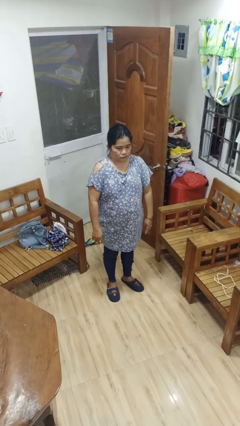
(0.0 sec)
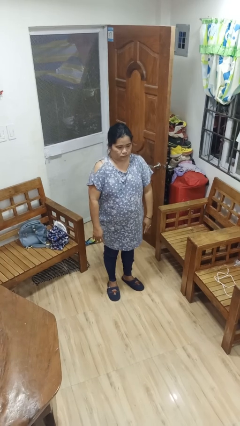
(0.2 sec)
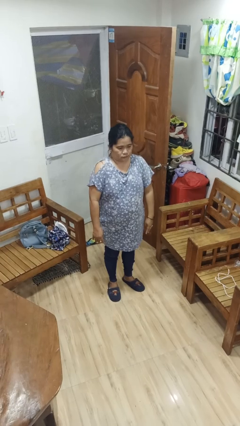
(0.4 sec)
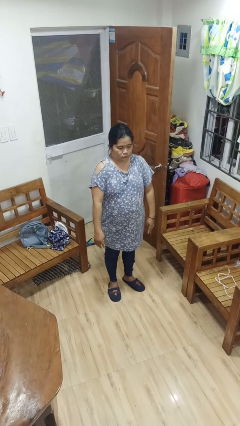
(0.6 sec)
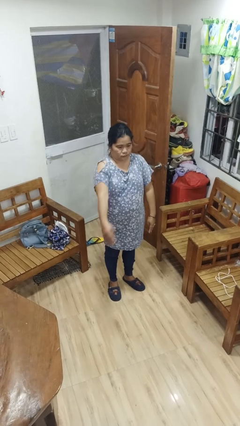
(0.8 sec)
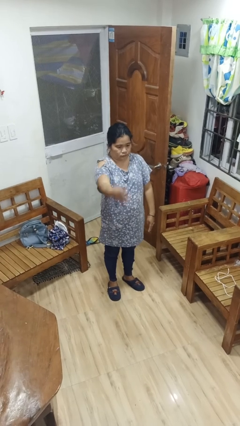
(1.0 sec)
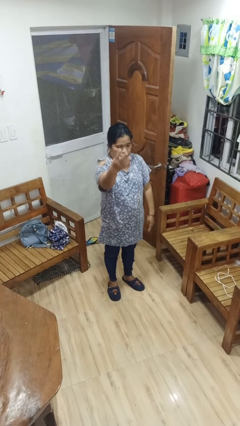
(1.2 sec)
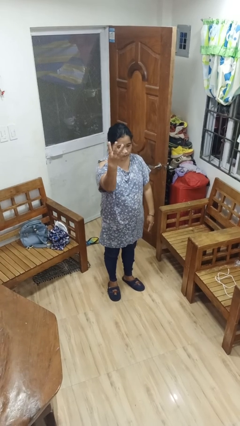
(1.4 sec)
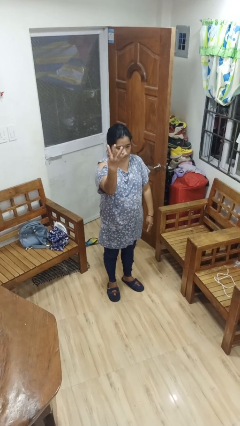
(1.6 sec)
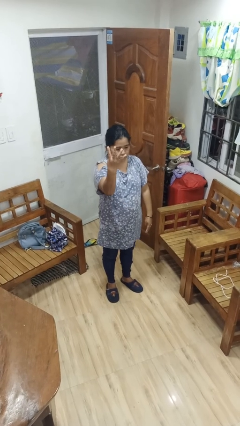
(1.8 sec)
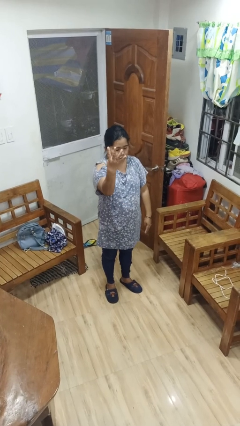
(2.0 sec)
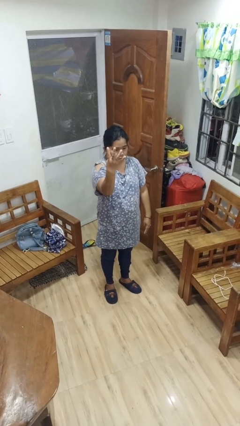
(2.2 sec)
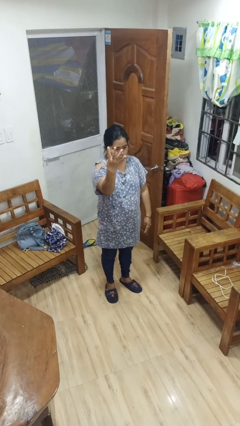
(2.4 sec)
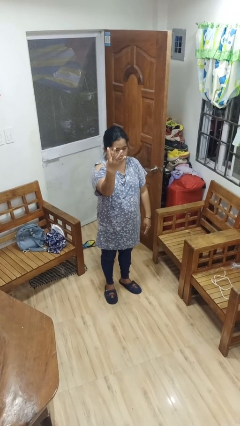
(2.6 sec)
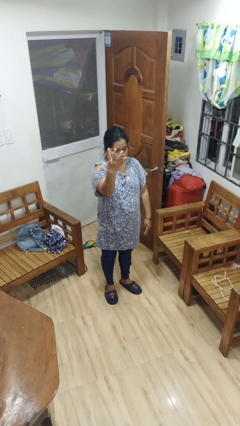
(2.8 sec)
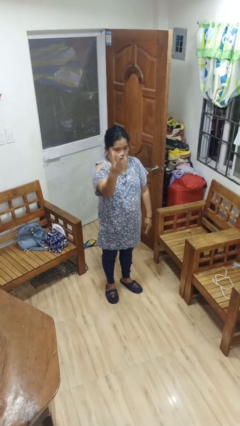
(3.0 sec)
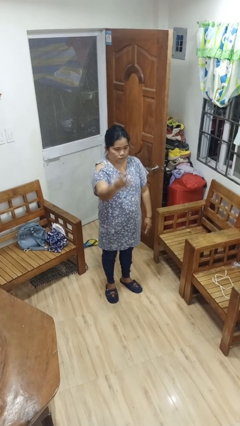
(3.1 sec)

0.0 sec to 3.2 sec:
person gestures number four

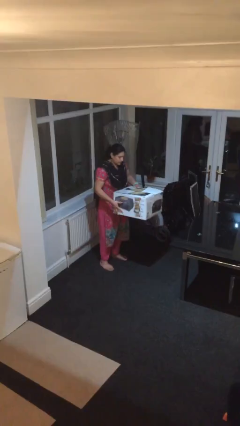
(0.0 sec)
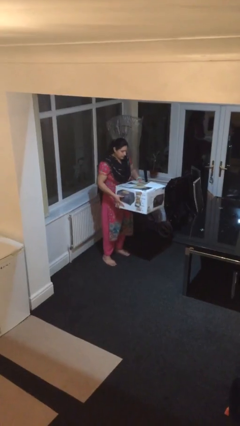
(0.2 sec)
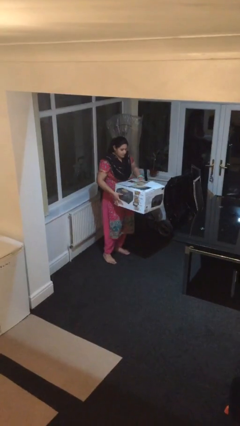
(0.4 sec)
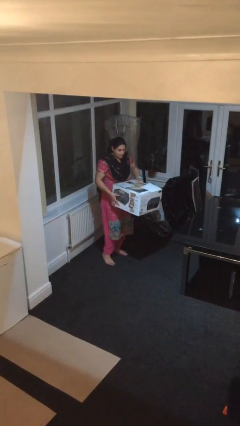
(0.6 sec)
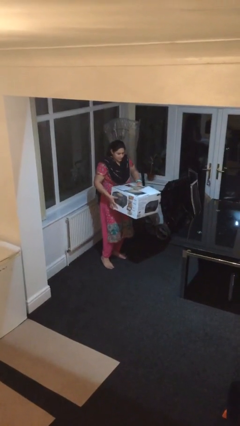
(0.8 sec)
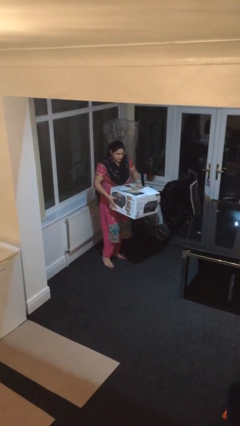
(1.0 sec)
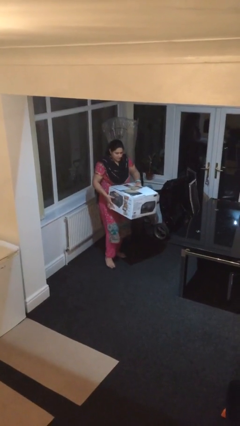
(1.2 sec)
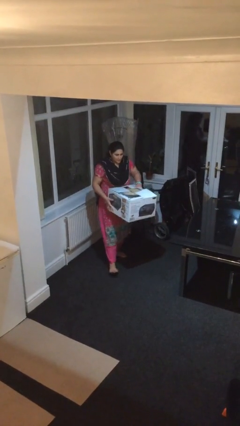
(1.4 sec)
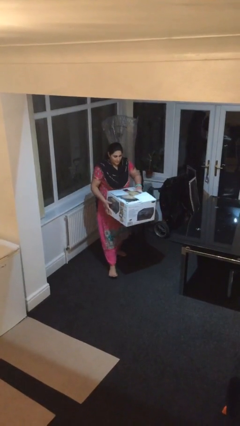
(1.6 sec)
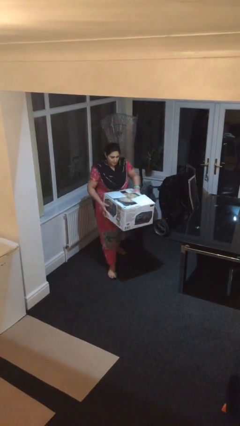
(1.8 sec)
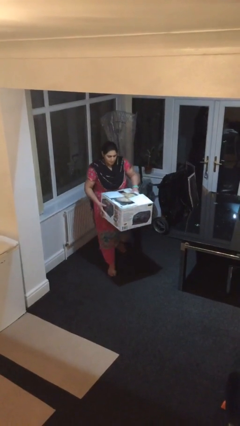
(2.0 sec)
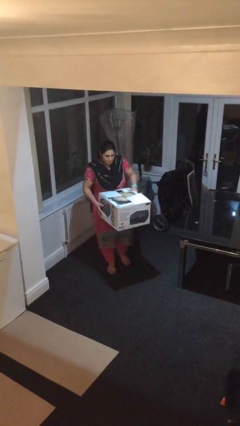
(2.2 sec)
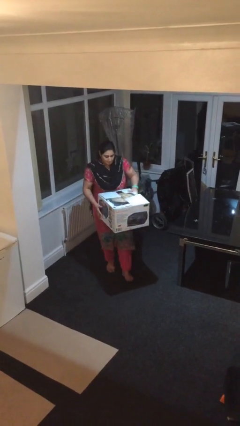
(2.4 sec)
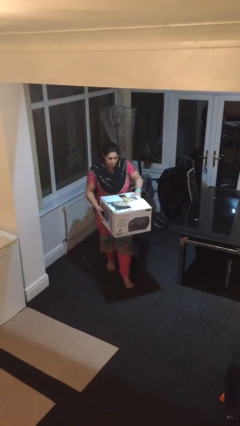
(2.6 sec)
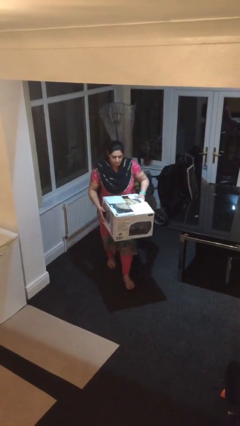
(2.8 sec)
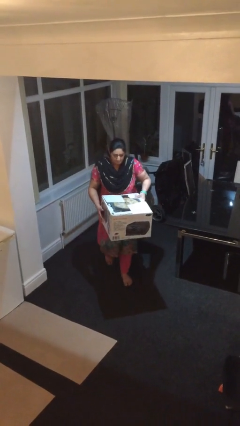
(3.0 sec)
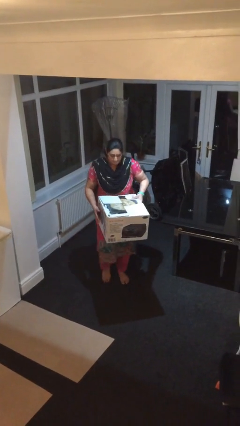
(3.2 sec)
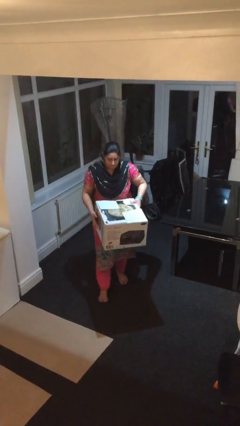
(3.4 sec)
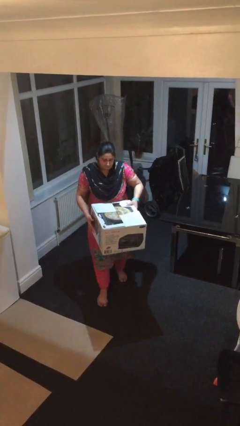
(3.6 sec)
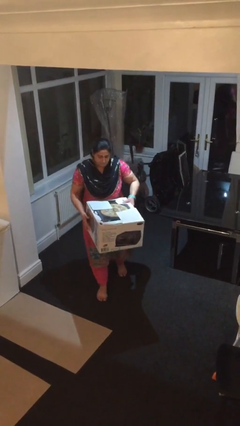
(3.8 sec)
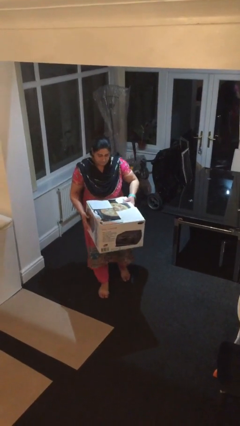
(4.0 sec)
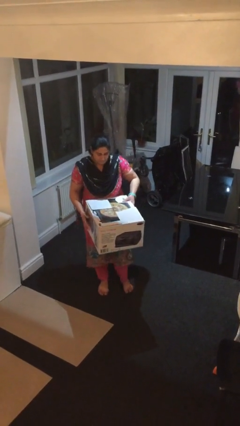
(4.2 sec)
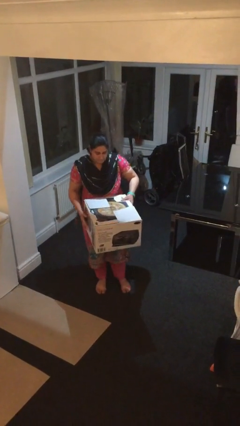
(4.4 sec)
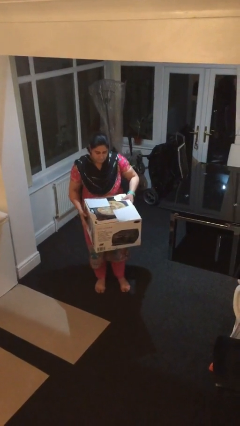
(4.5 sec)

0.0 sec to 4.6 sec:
person carries heavy object

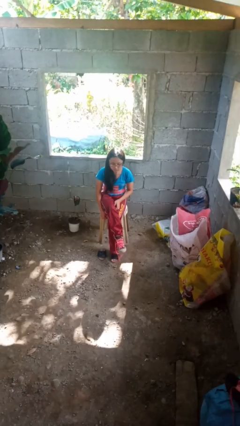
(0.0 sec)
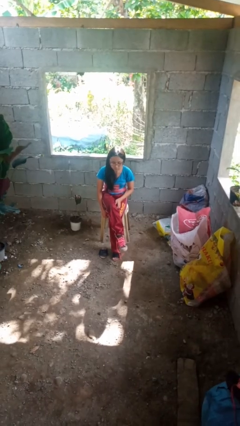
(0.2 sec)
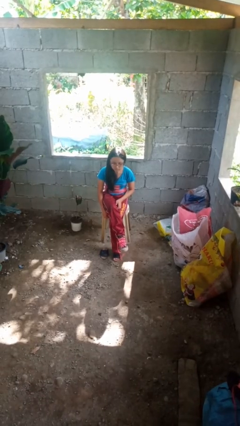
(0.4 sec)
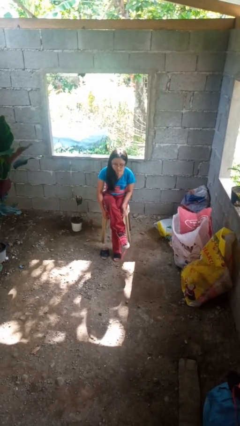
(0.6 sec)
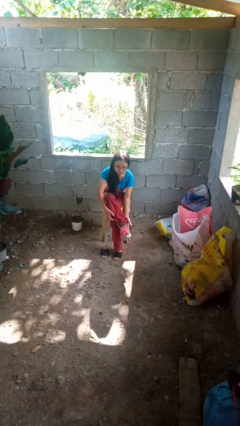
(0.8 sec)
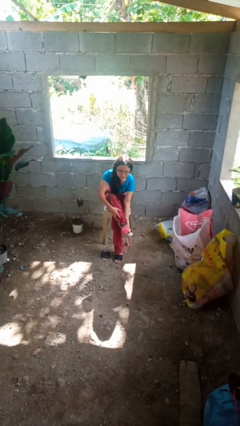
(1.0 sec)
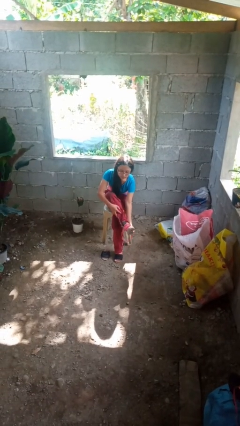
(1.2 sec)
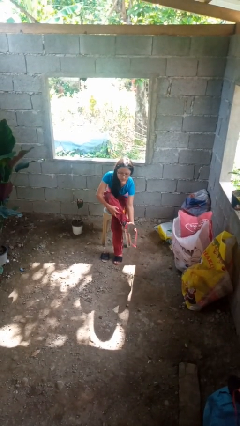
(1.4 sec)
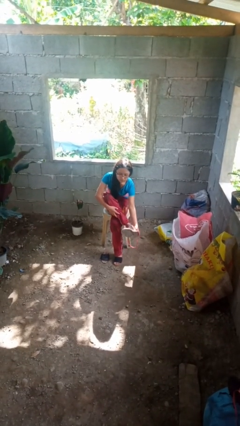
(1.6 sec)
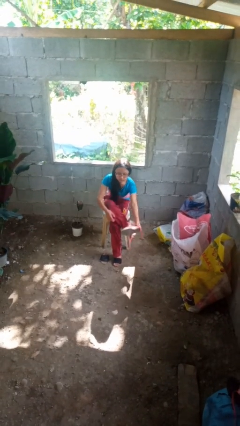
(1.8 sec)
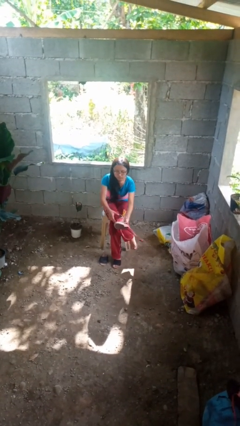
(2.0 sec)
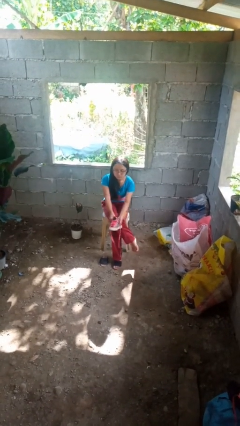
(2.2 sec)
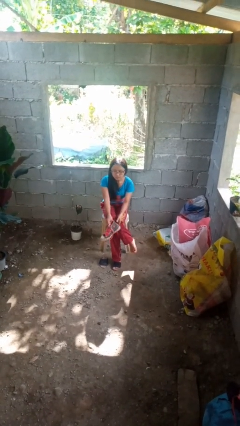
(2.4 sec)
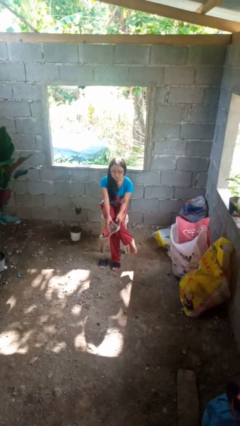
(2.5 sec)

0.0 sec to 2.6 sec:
person takes off shoes

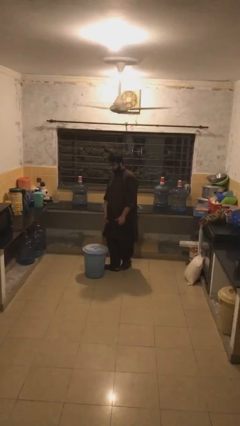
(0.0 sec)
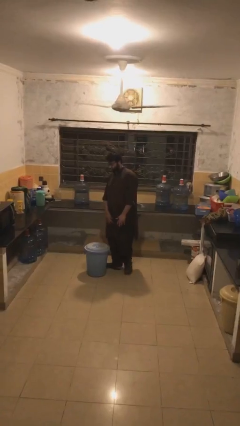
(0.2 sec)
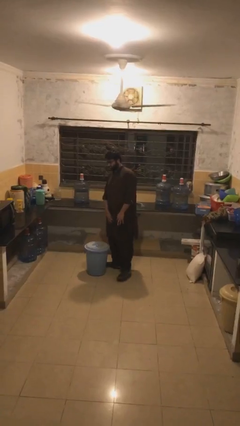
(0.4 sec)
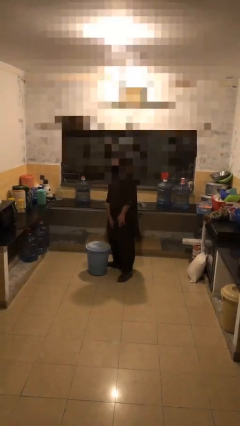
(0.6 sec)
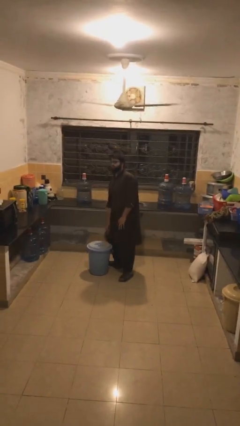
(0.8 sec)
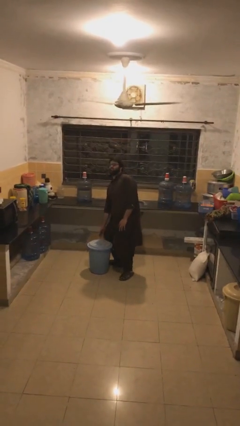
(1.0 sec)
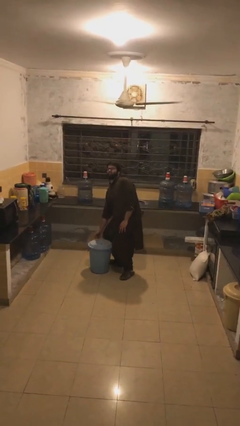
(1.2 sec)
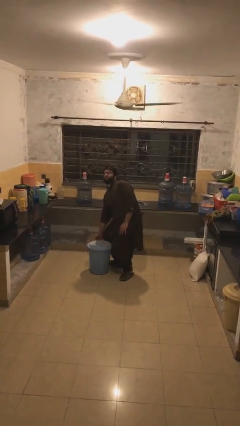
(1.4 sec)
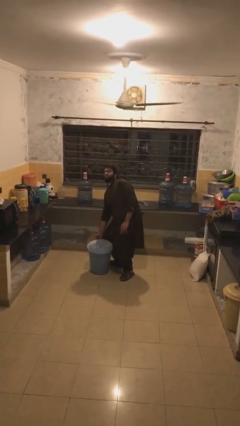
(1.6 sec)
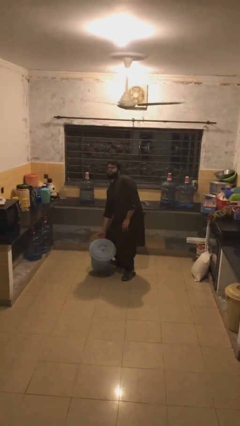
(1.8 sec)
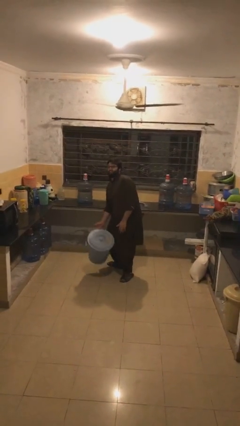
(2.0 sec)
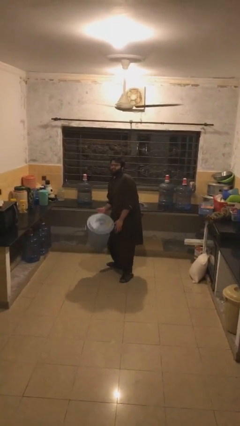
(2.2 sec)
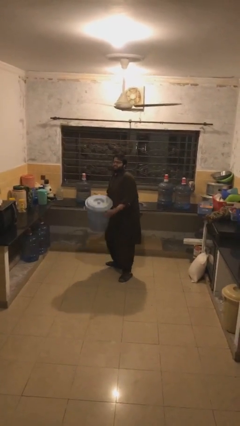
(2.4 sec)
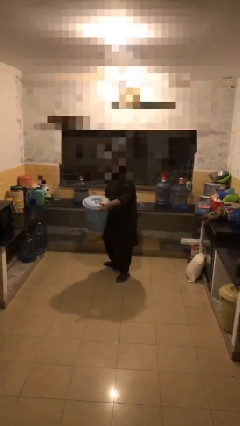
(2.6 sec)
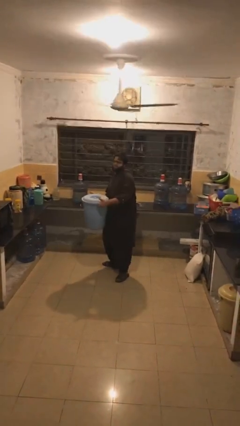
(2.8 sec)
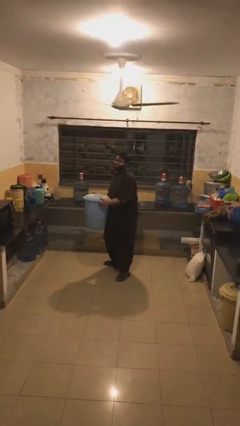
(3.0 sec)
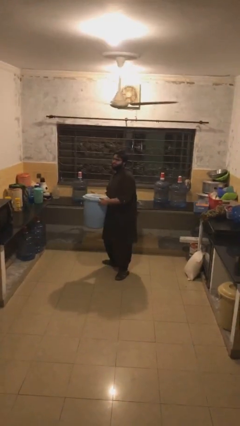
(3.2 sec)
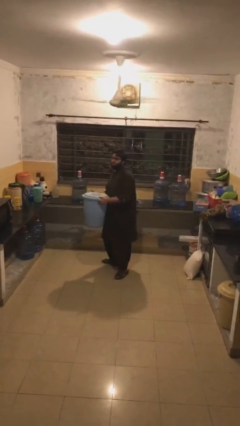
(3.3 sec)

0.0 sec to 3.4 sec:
person picks up object from floor

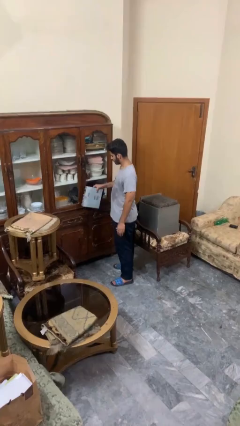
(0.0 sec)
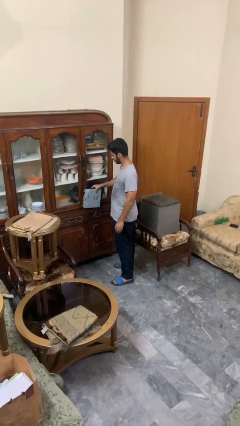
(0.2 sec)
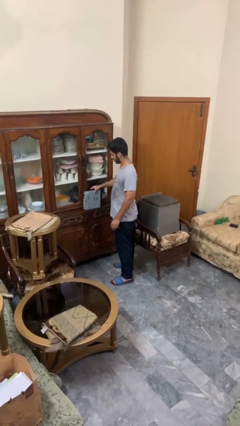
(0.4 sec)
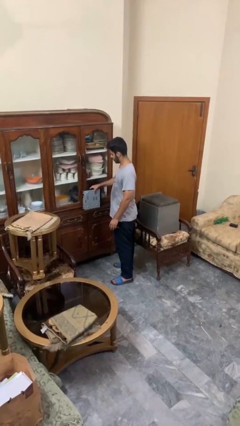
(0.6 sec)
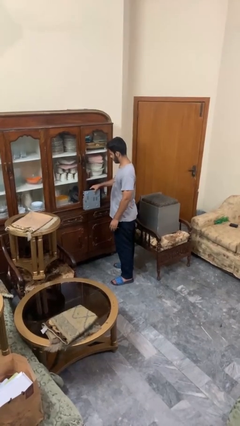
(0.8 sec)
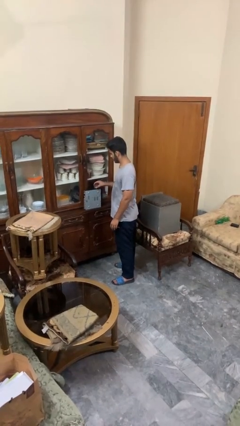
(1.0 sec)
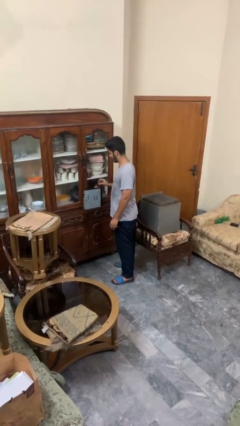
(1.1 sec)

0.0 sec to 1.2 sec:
person puts down object on countertop

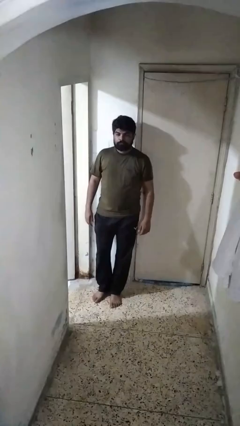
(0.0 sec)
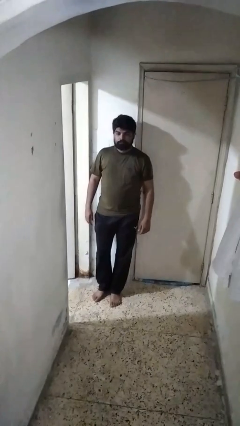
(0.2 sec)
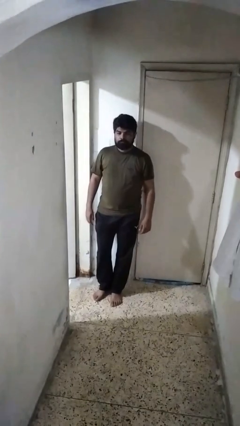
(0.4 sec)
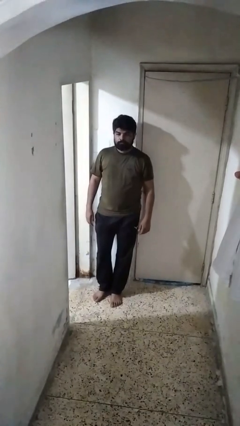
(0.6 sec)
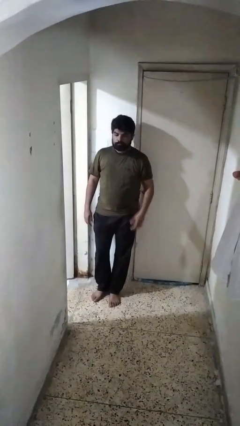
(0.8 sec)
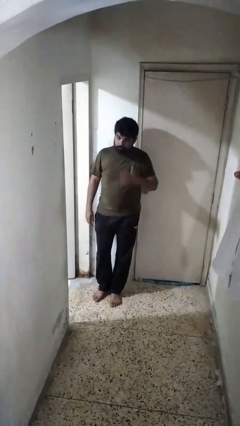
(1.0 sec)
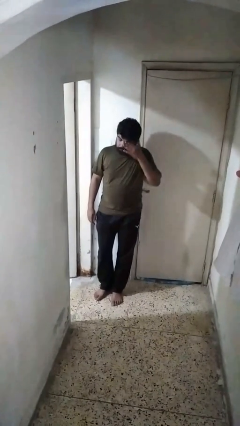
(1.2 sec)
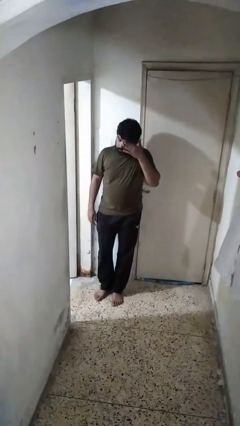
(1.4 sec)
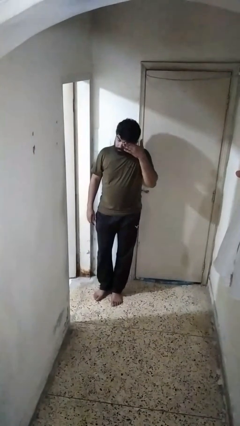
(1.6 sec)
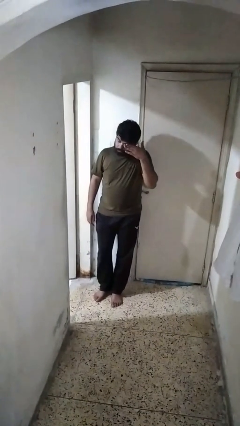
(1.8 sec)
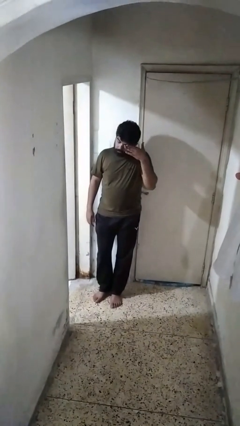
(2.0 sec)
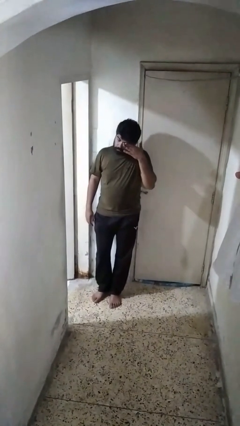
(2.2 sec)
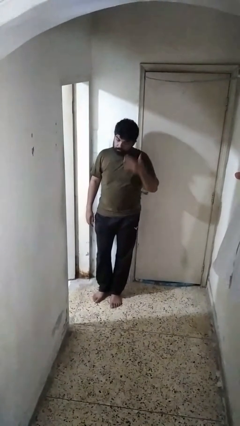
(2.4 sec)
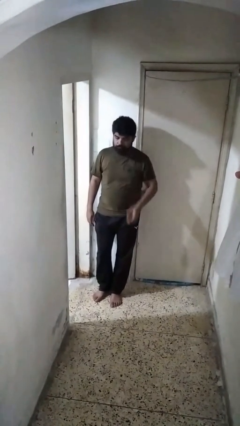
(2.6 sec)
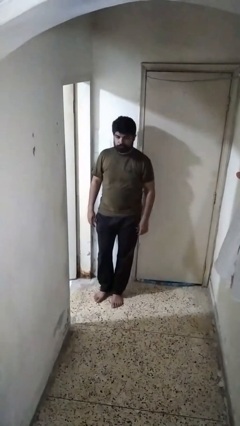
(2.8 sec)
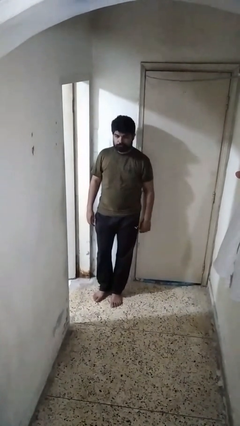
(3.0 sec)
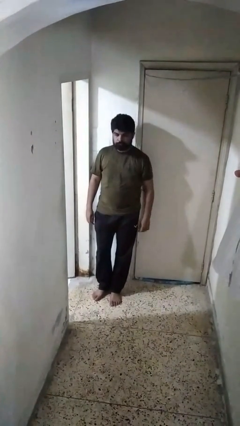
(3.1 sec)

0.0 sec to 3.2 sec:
person rubs eyes
